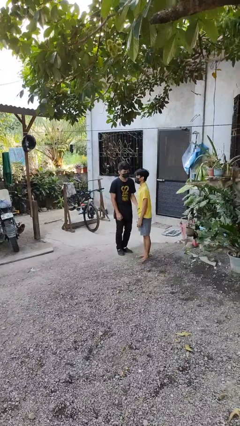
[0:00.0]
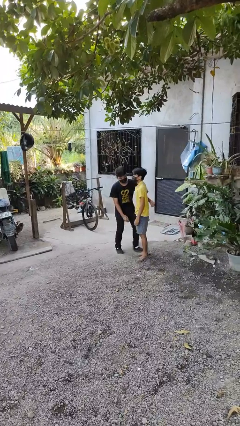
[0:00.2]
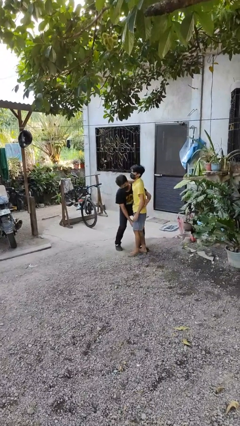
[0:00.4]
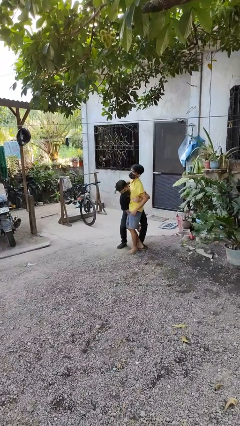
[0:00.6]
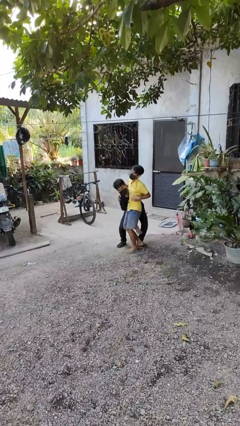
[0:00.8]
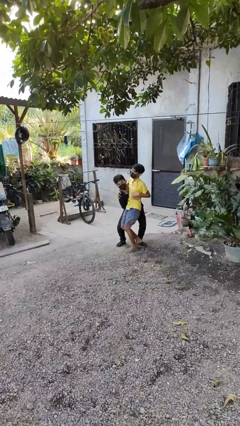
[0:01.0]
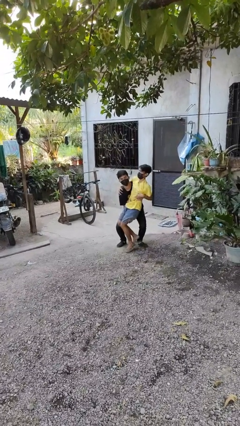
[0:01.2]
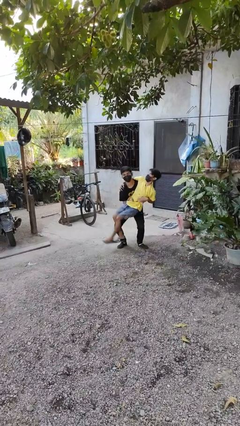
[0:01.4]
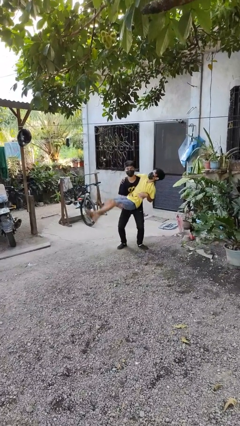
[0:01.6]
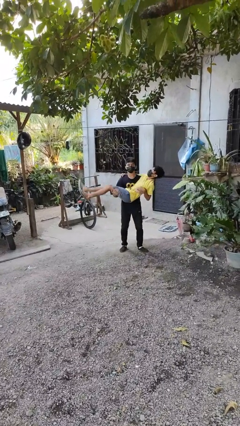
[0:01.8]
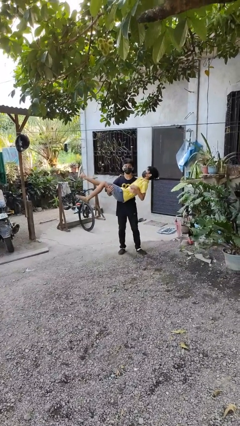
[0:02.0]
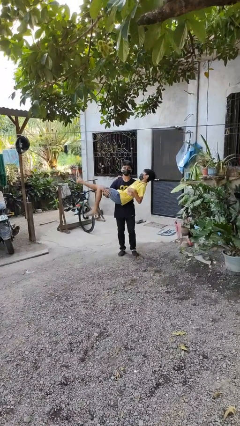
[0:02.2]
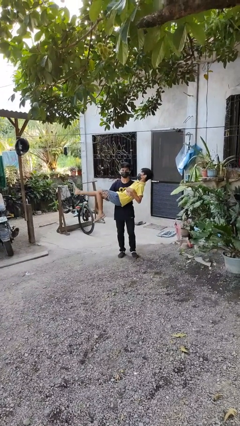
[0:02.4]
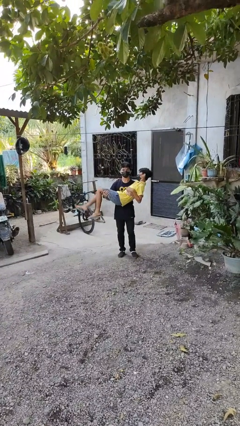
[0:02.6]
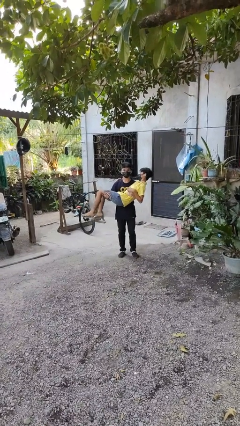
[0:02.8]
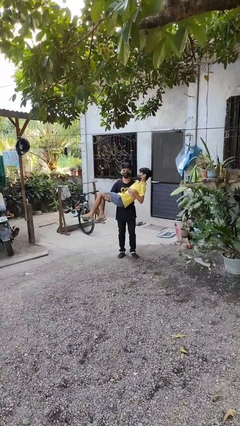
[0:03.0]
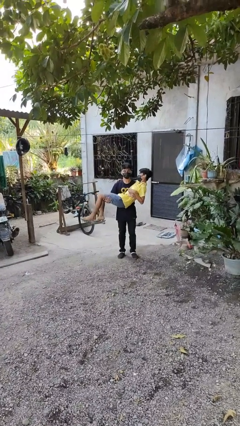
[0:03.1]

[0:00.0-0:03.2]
person picks up person

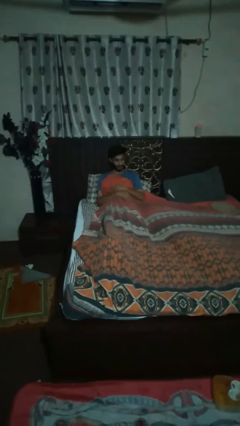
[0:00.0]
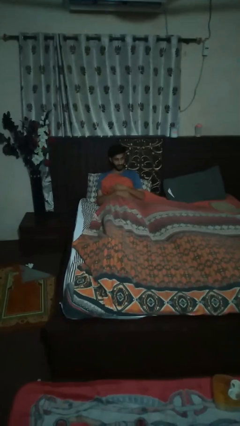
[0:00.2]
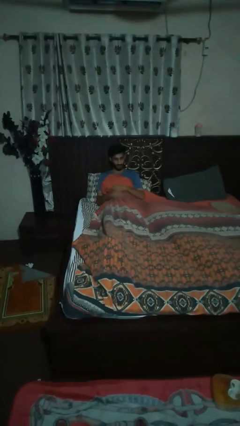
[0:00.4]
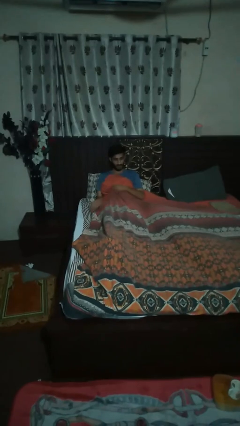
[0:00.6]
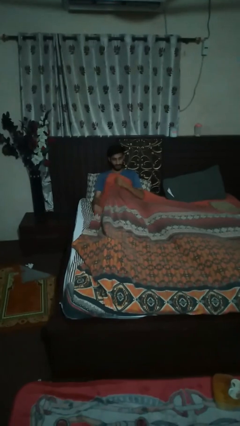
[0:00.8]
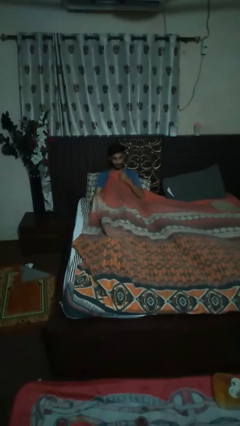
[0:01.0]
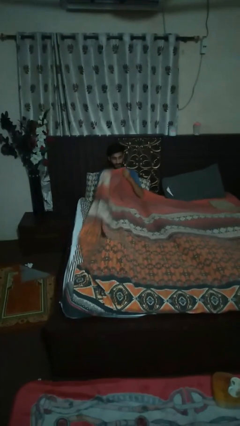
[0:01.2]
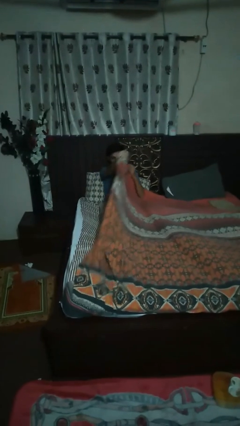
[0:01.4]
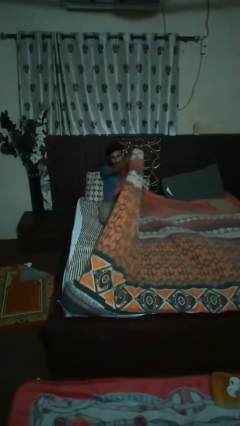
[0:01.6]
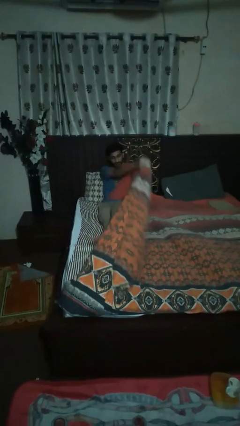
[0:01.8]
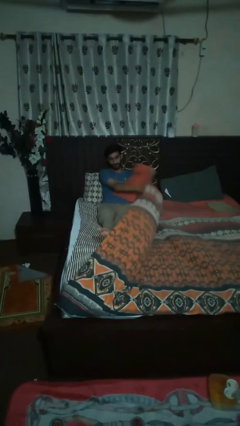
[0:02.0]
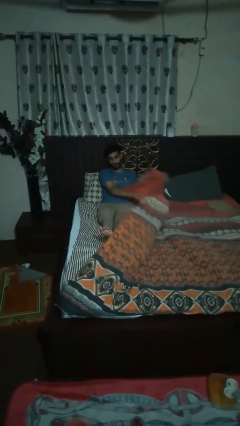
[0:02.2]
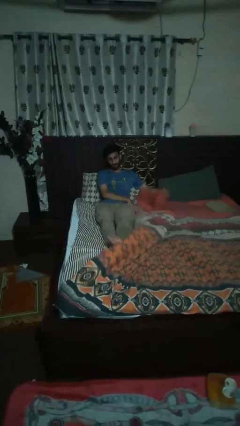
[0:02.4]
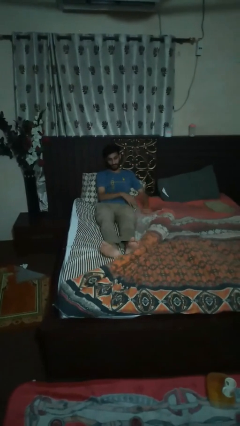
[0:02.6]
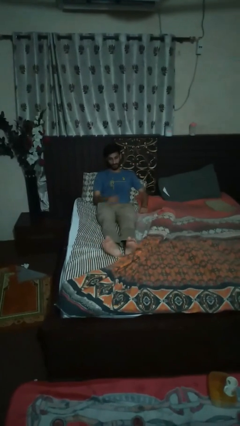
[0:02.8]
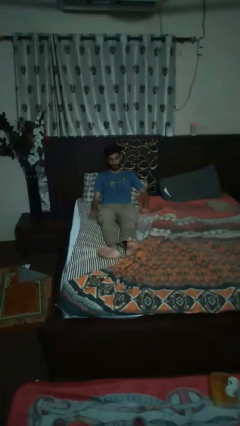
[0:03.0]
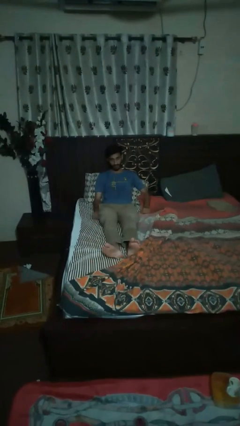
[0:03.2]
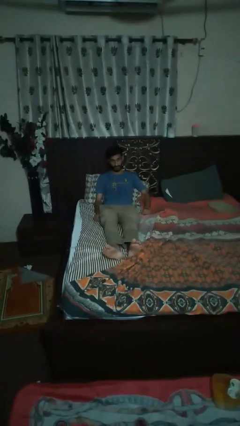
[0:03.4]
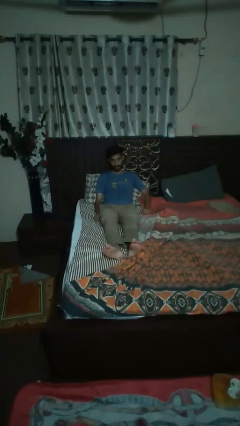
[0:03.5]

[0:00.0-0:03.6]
person uncovers with bedsheets

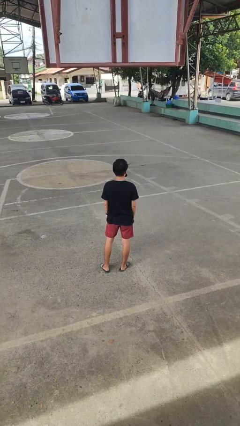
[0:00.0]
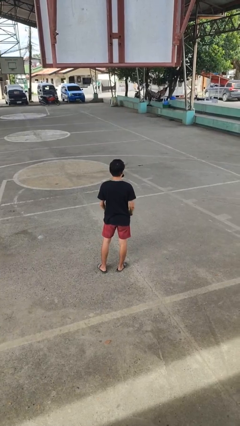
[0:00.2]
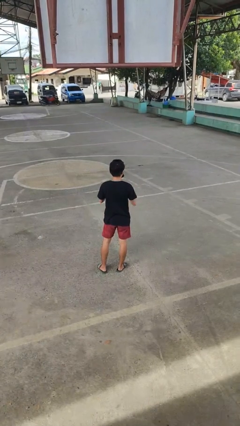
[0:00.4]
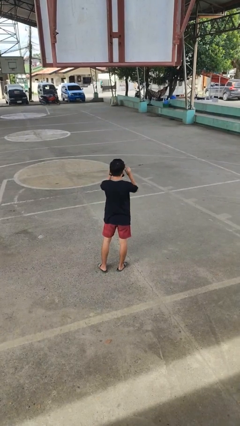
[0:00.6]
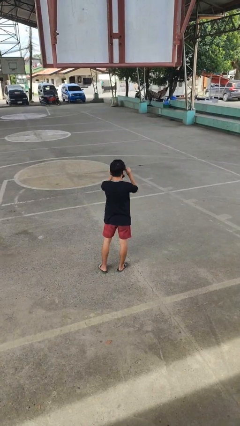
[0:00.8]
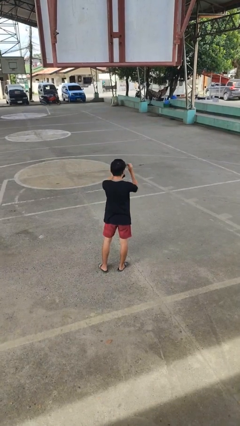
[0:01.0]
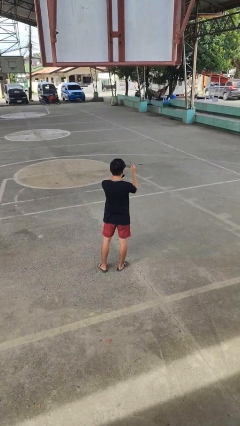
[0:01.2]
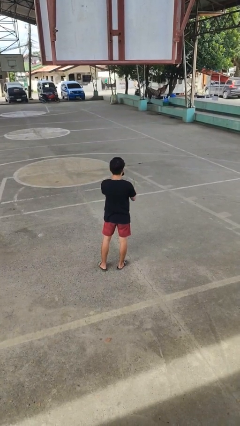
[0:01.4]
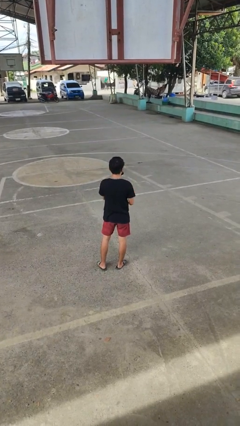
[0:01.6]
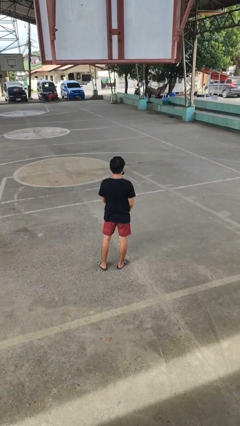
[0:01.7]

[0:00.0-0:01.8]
person takes off glasses

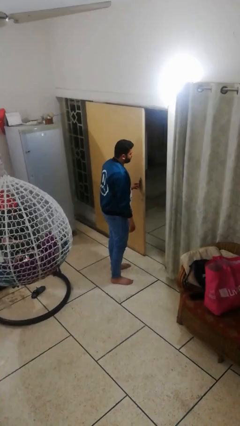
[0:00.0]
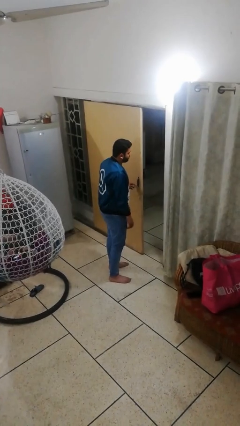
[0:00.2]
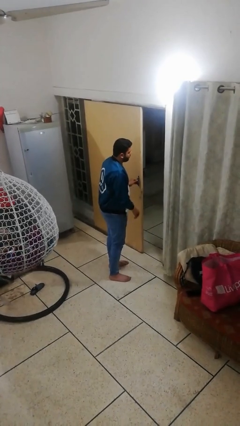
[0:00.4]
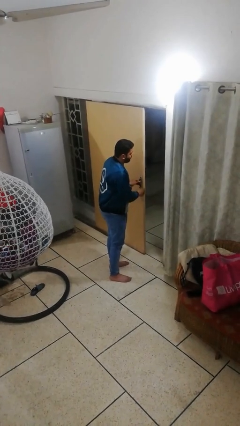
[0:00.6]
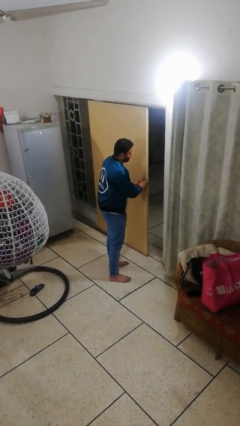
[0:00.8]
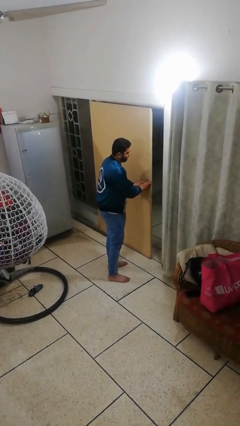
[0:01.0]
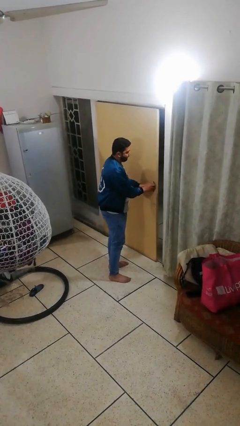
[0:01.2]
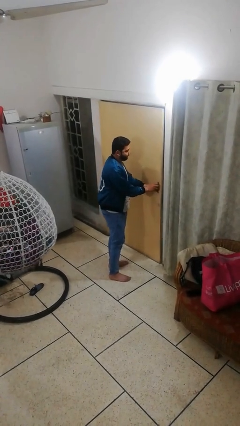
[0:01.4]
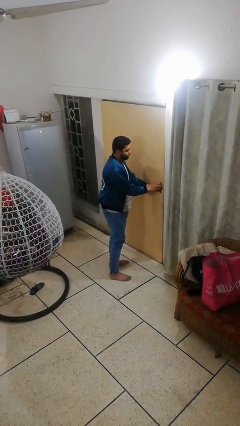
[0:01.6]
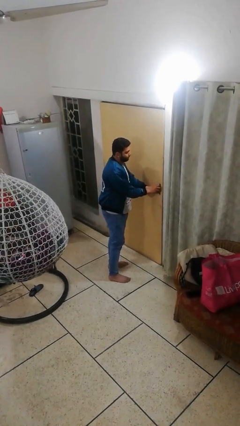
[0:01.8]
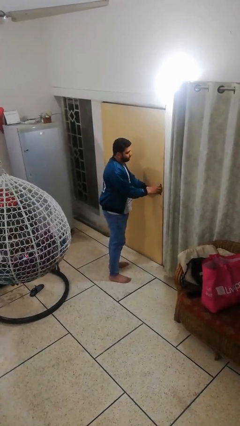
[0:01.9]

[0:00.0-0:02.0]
person closes facility door

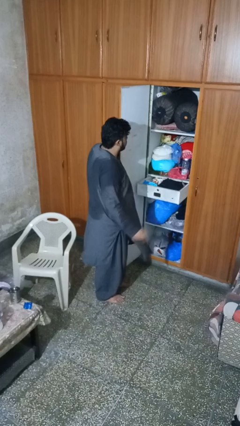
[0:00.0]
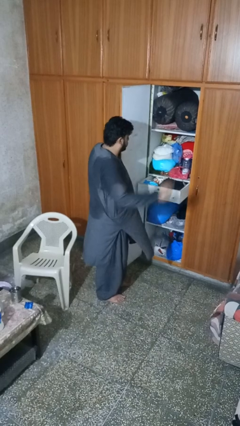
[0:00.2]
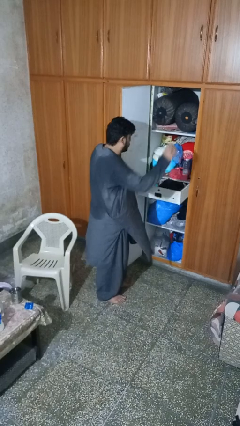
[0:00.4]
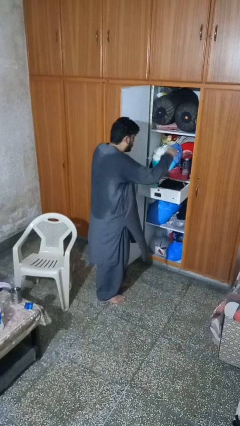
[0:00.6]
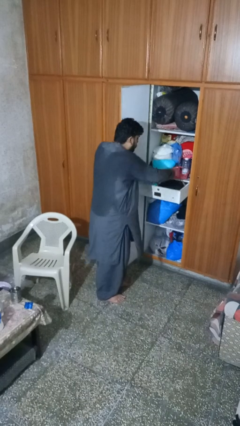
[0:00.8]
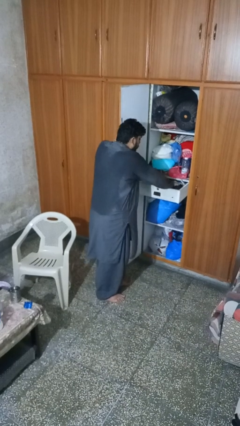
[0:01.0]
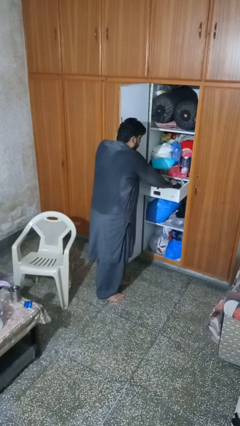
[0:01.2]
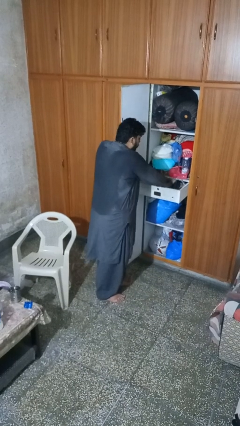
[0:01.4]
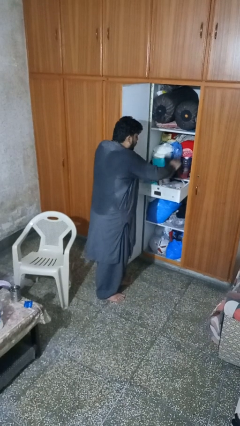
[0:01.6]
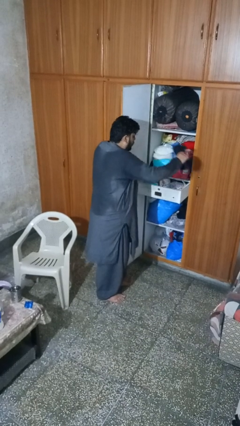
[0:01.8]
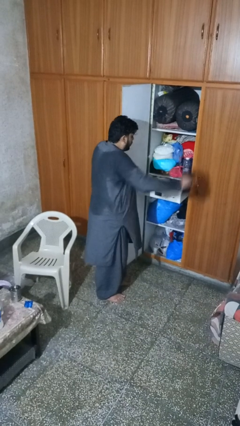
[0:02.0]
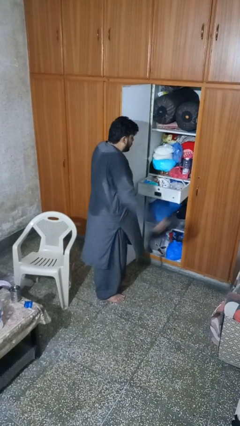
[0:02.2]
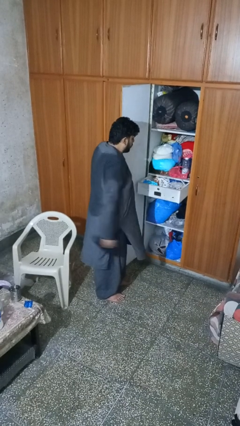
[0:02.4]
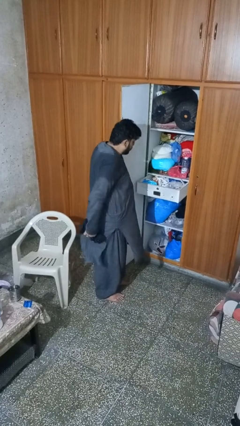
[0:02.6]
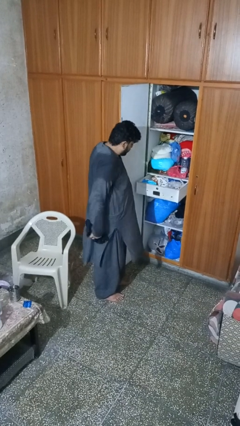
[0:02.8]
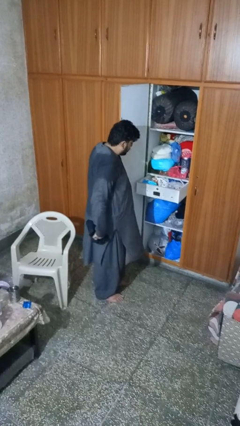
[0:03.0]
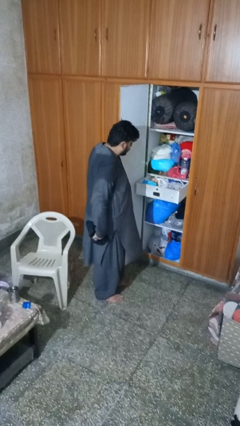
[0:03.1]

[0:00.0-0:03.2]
person takes clothes from dresser

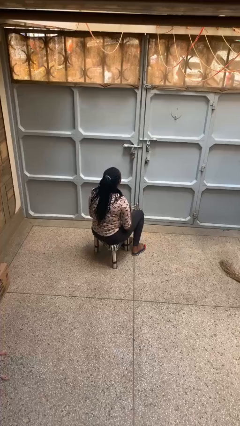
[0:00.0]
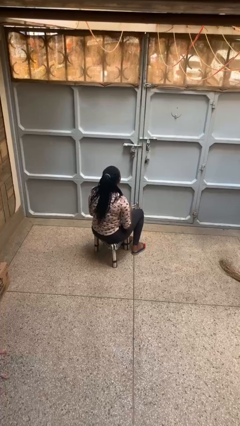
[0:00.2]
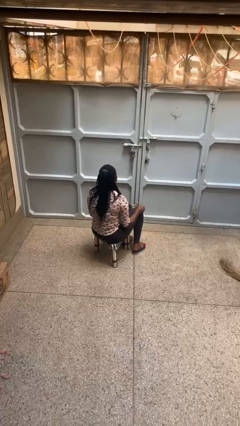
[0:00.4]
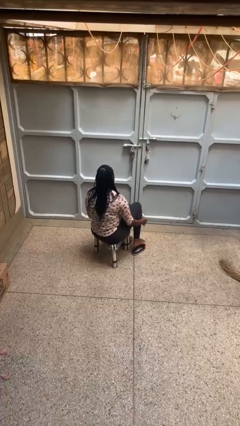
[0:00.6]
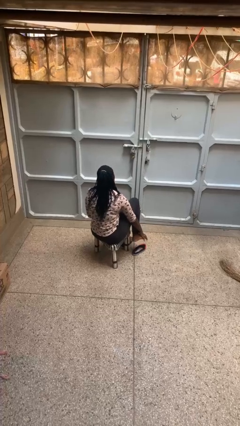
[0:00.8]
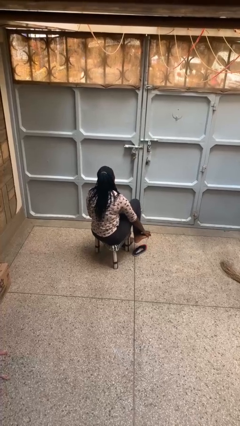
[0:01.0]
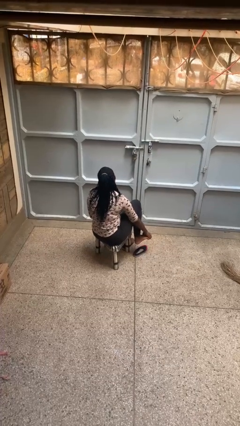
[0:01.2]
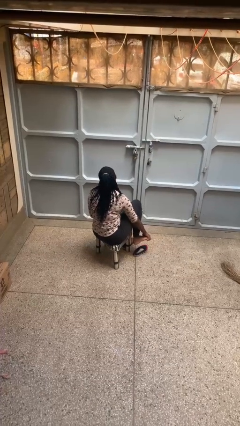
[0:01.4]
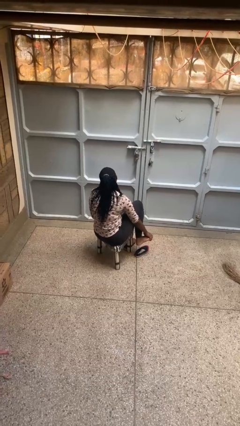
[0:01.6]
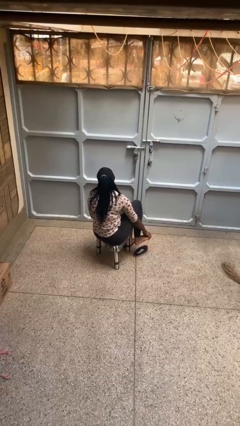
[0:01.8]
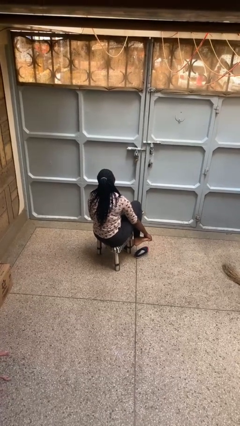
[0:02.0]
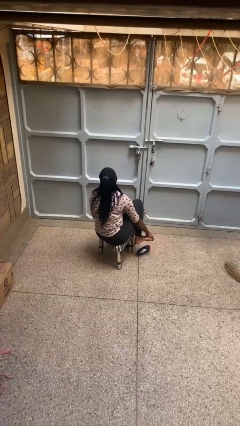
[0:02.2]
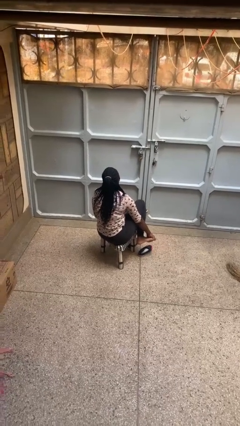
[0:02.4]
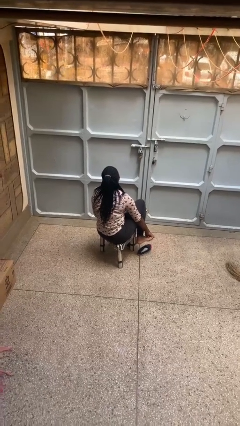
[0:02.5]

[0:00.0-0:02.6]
person rubs foot

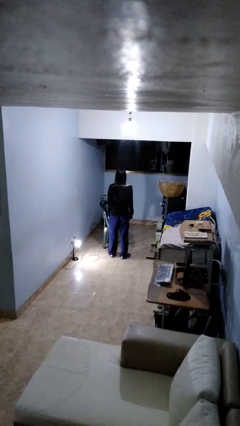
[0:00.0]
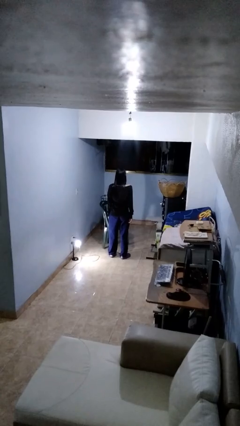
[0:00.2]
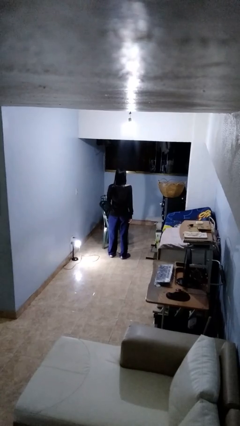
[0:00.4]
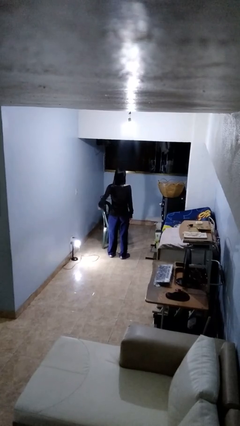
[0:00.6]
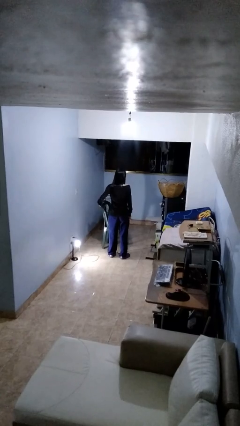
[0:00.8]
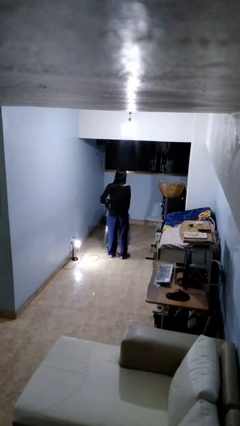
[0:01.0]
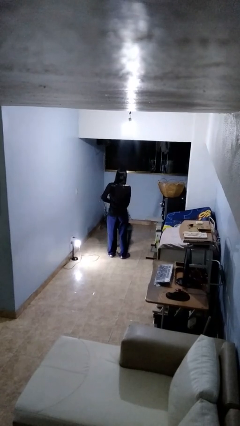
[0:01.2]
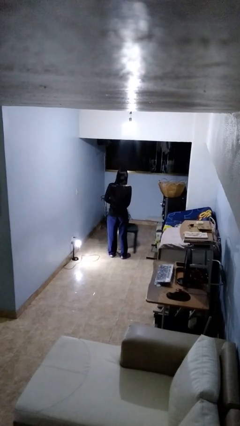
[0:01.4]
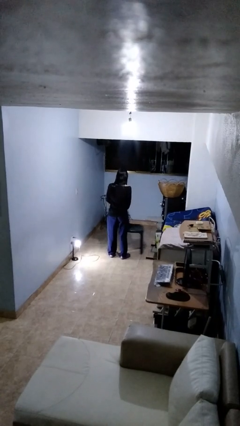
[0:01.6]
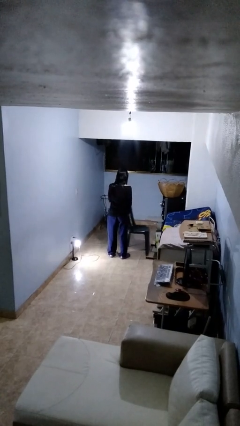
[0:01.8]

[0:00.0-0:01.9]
person pushes in chair
